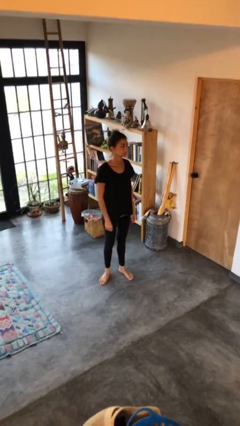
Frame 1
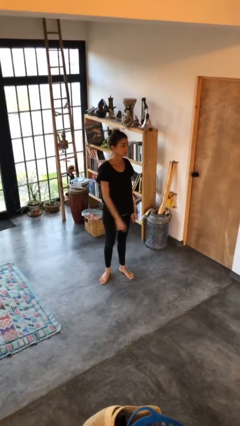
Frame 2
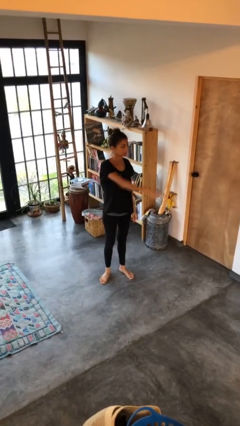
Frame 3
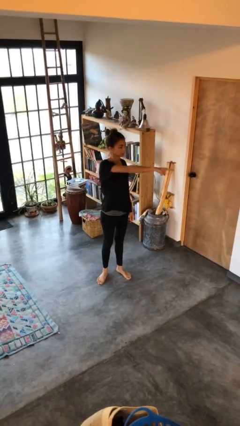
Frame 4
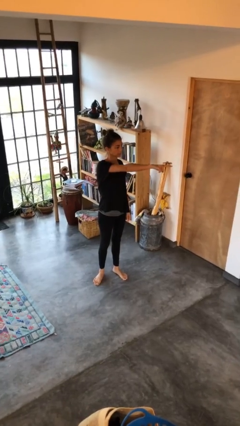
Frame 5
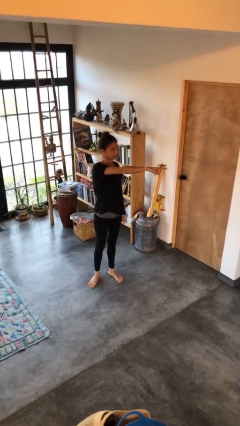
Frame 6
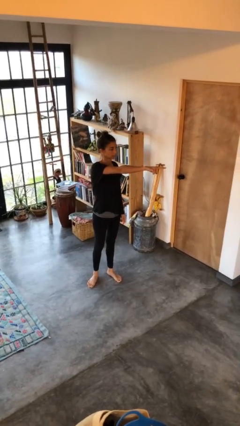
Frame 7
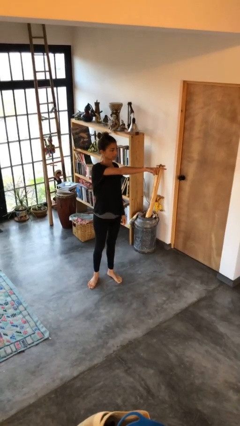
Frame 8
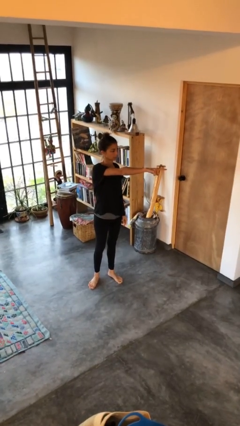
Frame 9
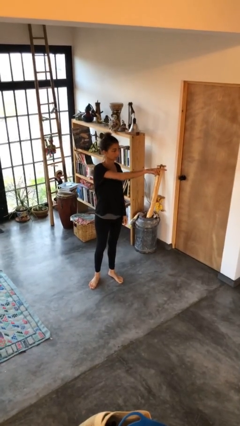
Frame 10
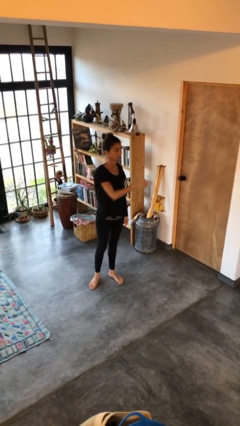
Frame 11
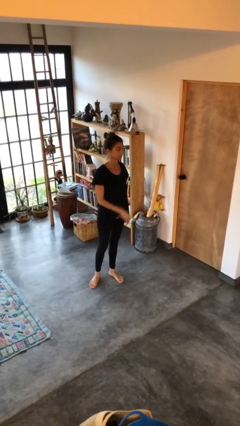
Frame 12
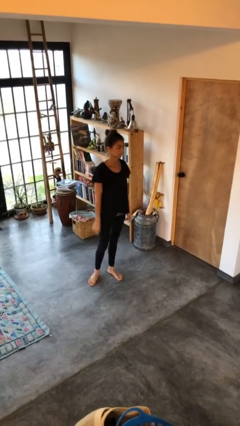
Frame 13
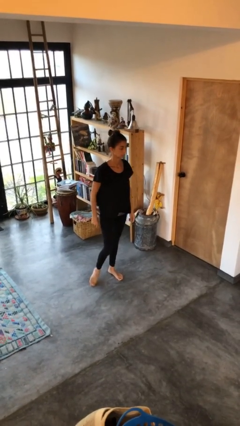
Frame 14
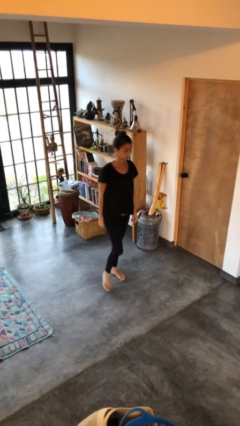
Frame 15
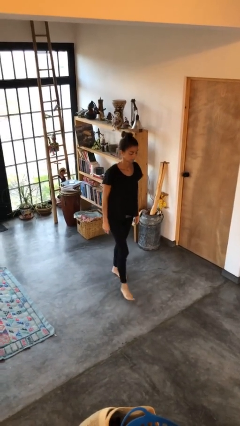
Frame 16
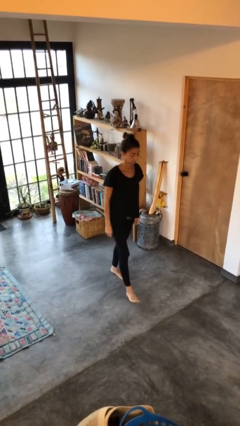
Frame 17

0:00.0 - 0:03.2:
person points at person

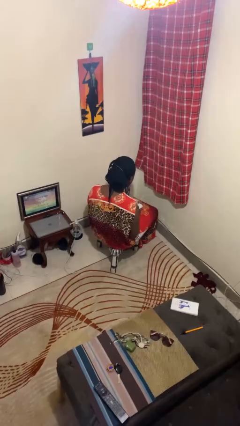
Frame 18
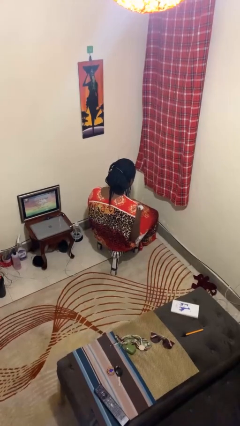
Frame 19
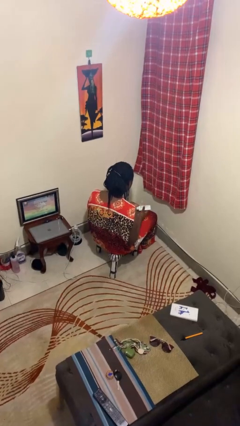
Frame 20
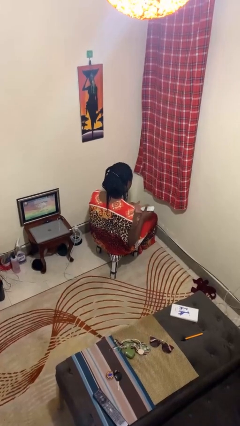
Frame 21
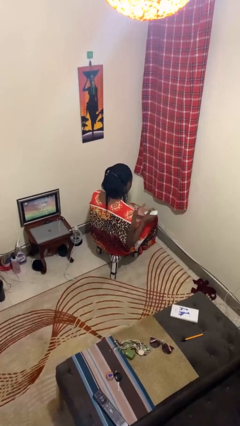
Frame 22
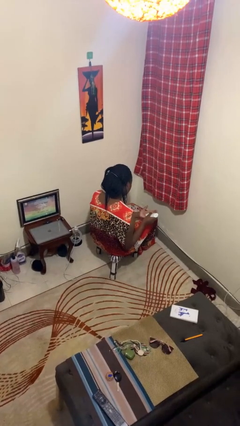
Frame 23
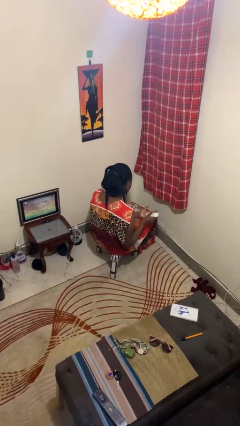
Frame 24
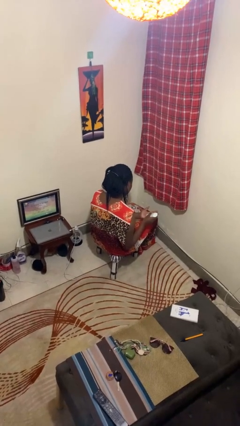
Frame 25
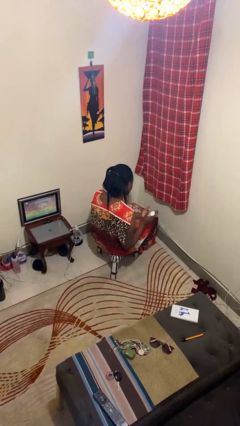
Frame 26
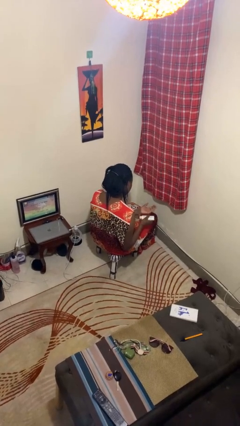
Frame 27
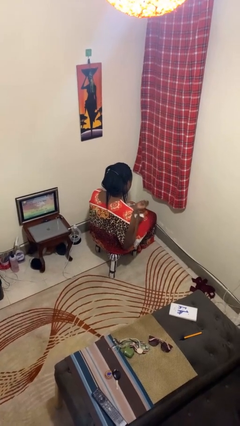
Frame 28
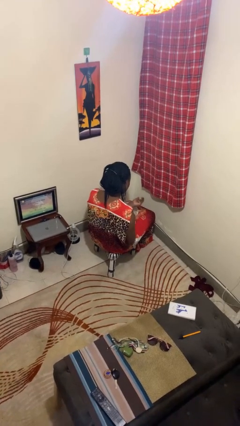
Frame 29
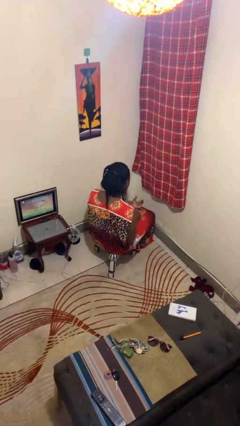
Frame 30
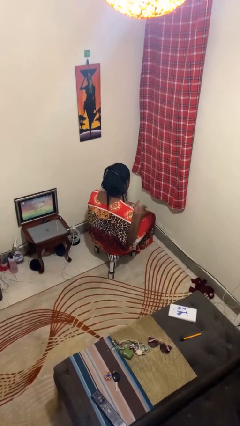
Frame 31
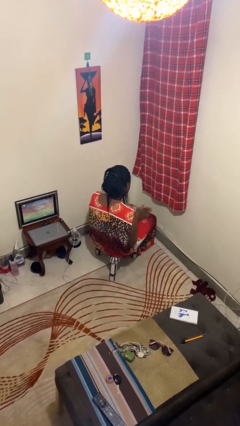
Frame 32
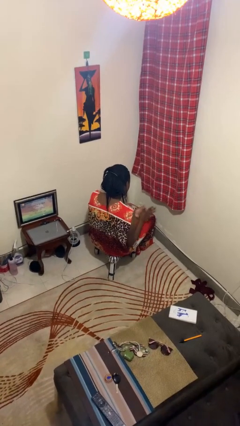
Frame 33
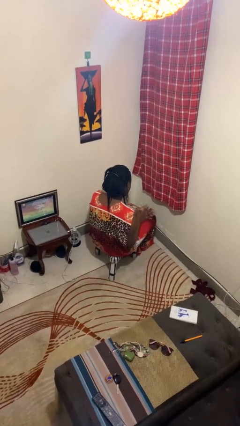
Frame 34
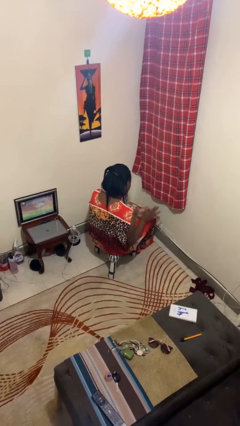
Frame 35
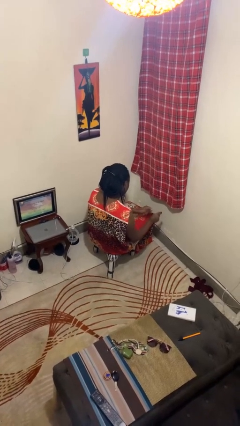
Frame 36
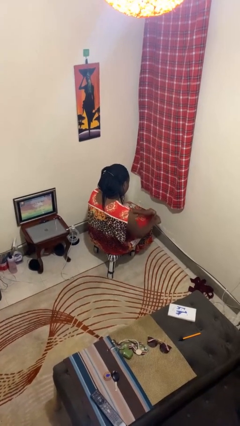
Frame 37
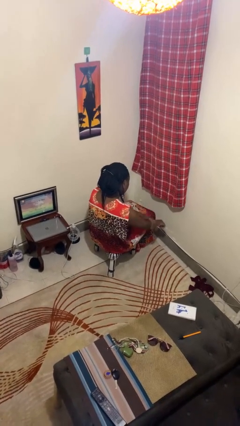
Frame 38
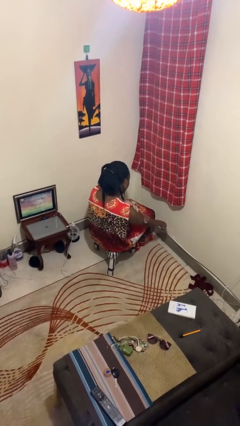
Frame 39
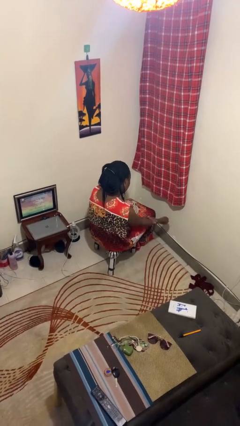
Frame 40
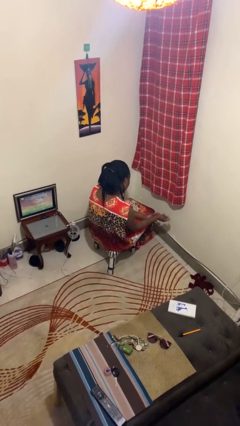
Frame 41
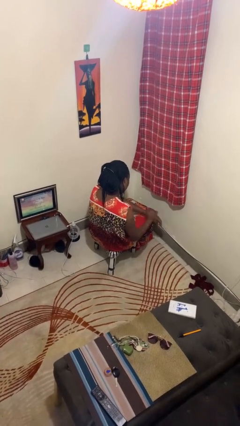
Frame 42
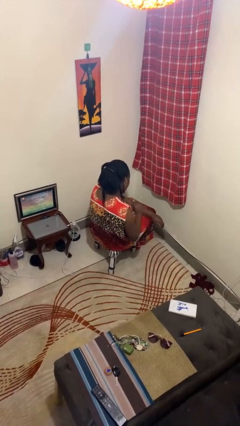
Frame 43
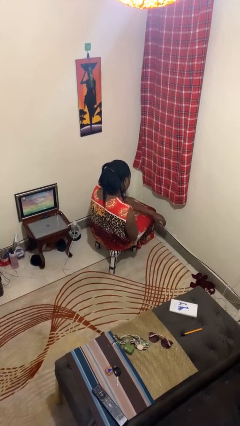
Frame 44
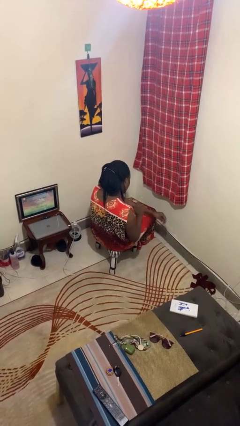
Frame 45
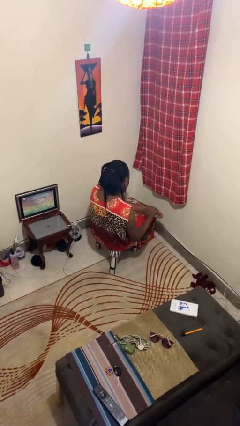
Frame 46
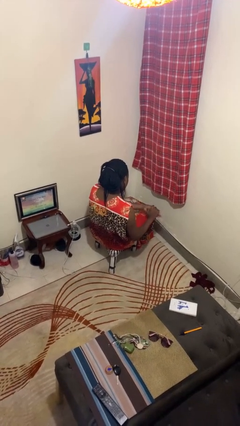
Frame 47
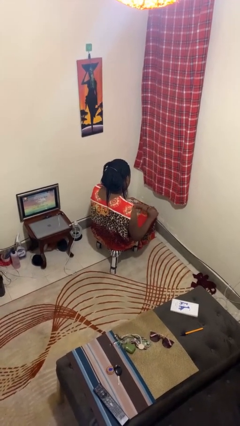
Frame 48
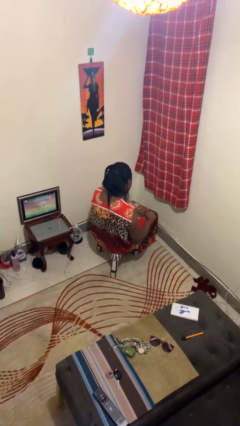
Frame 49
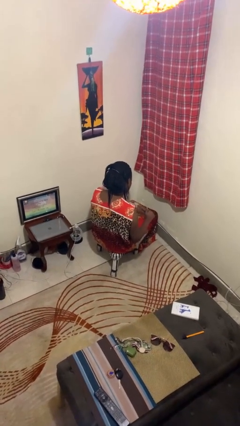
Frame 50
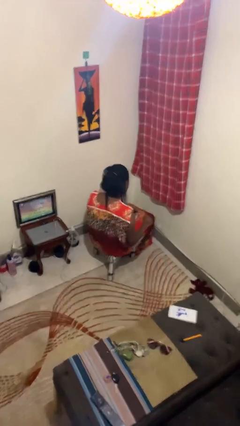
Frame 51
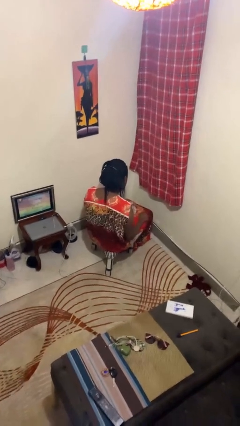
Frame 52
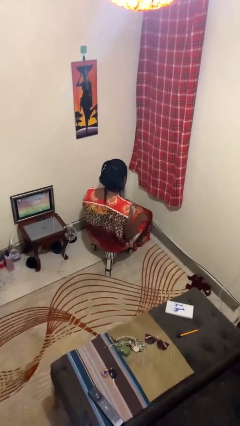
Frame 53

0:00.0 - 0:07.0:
person applies sunscreen

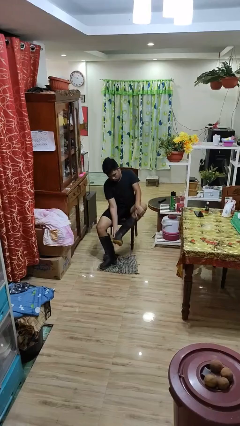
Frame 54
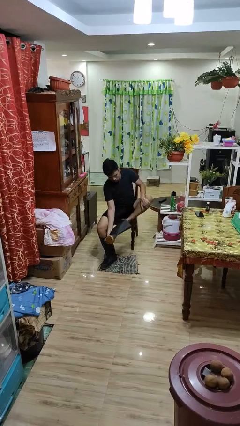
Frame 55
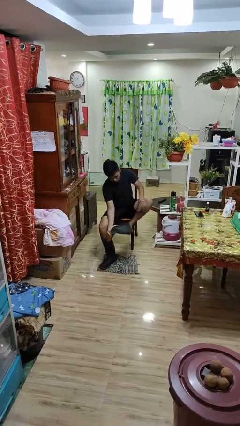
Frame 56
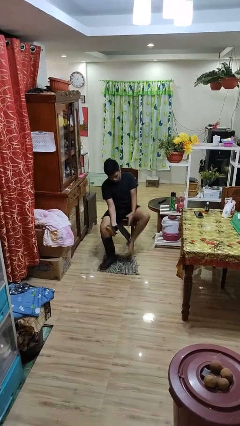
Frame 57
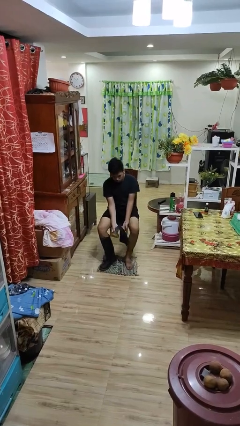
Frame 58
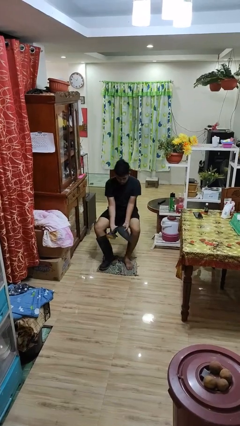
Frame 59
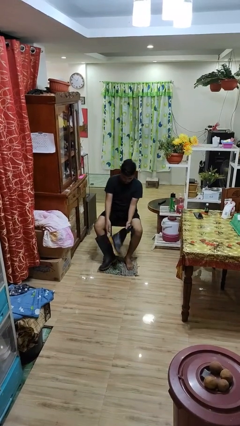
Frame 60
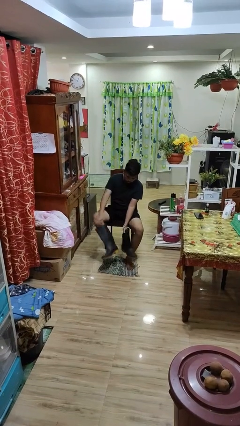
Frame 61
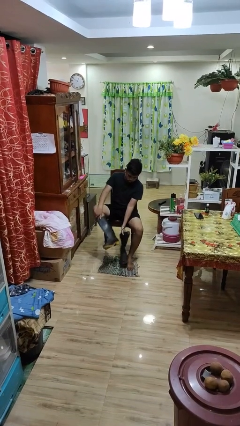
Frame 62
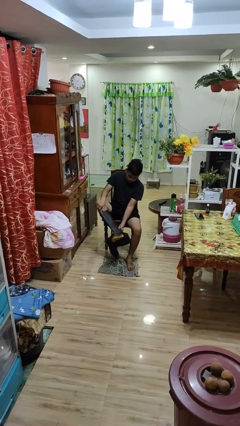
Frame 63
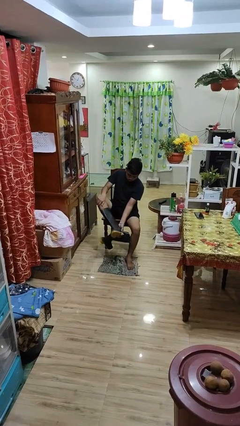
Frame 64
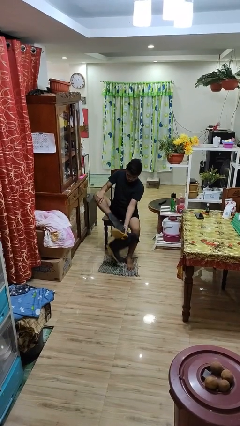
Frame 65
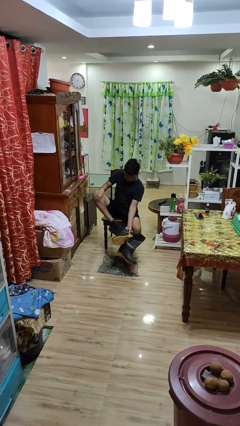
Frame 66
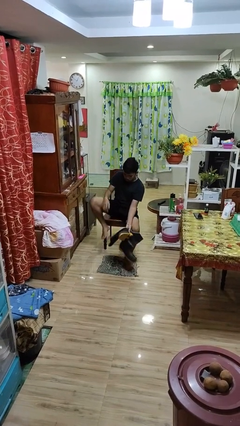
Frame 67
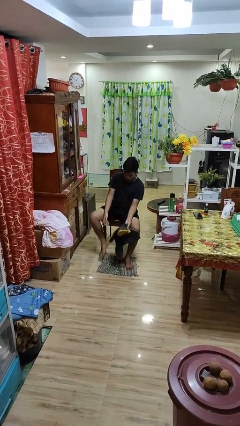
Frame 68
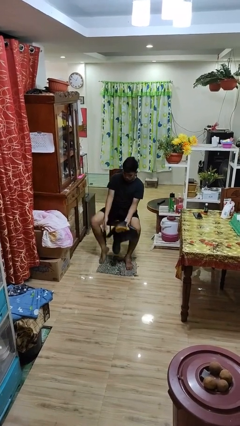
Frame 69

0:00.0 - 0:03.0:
person uses television remote

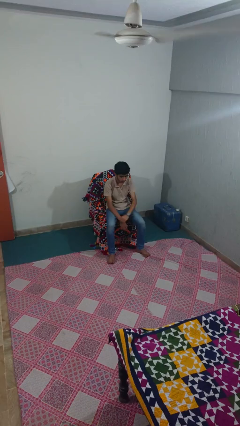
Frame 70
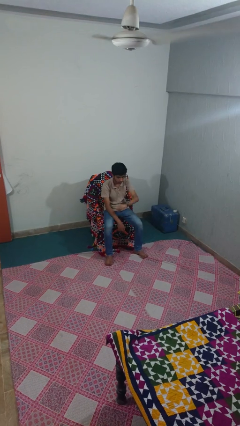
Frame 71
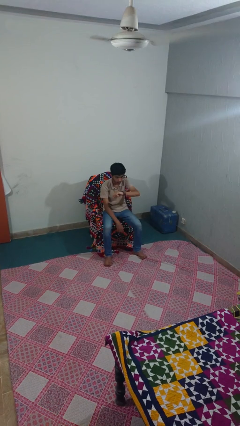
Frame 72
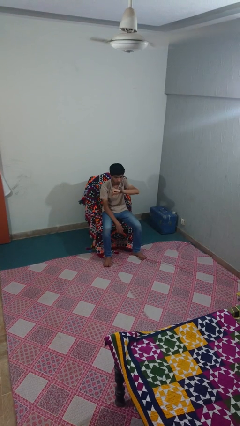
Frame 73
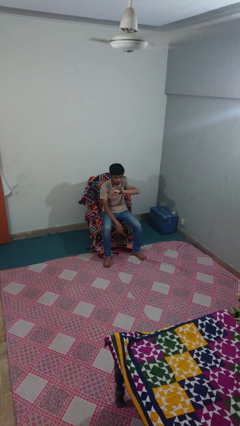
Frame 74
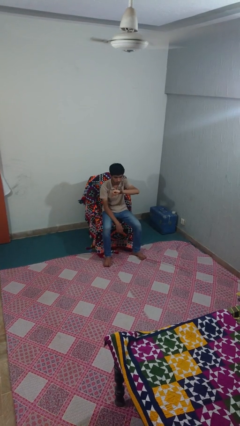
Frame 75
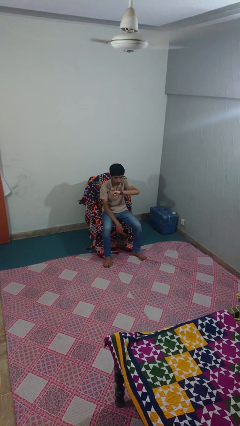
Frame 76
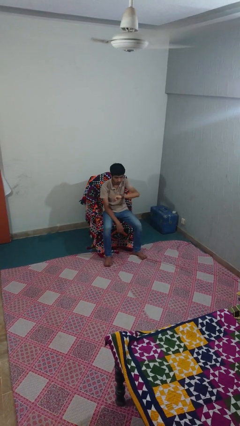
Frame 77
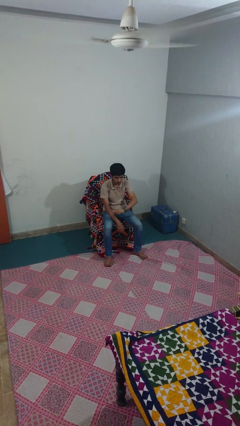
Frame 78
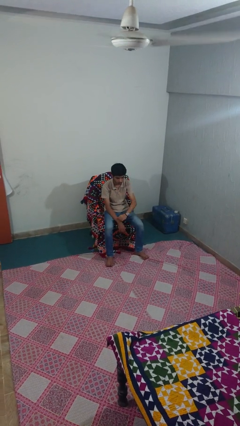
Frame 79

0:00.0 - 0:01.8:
person looks at wristwatch

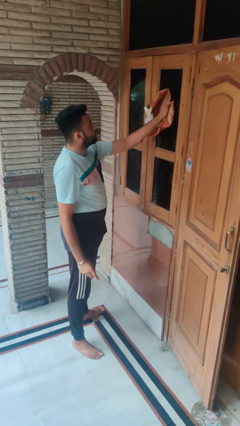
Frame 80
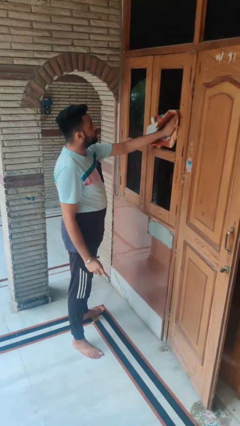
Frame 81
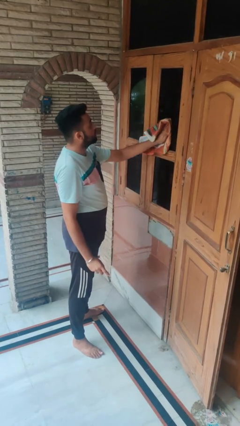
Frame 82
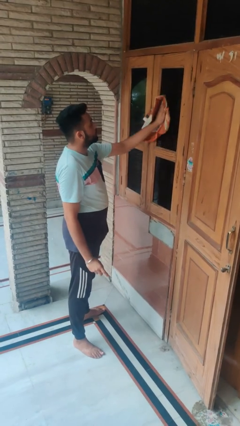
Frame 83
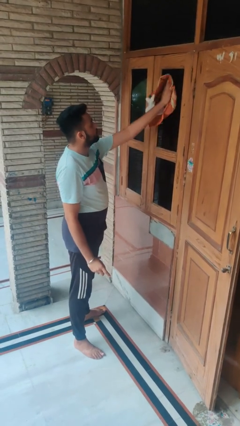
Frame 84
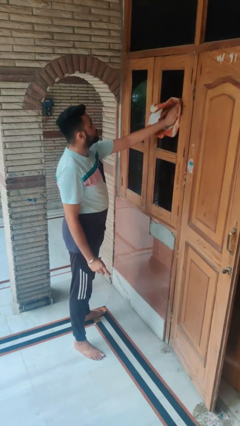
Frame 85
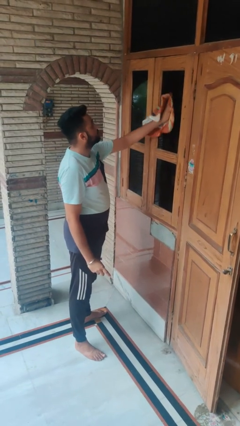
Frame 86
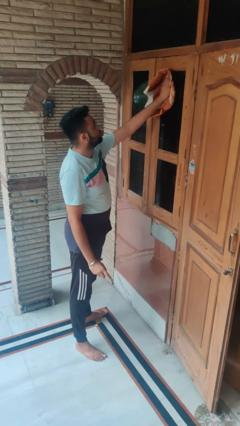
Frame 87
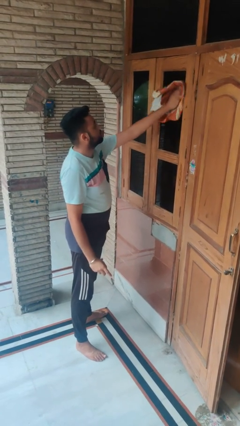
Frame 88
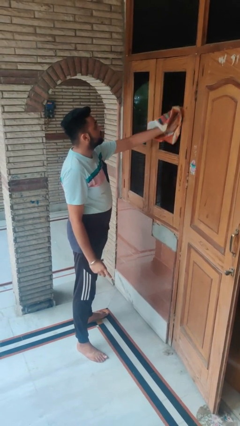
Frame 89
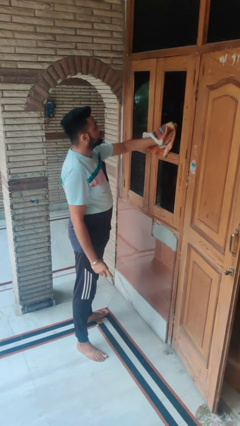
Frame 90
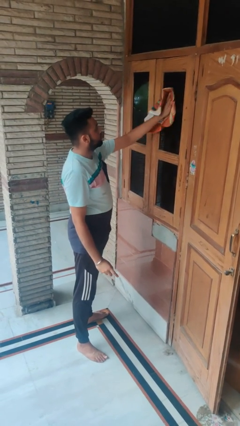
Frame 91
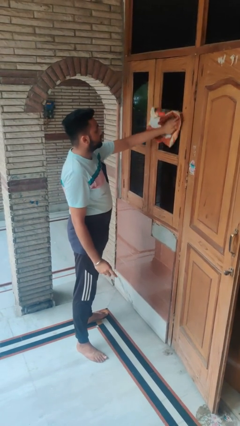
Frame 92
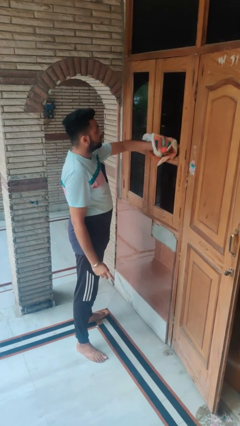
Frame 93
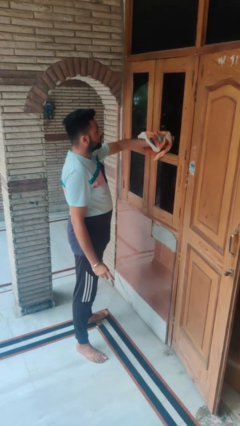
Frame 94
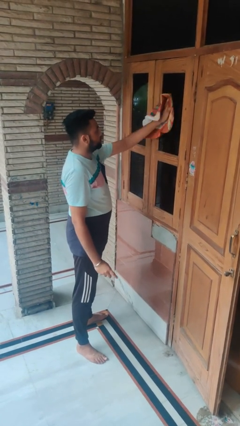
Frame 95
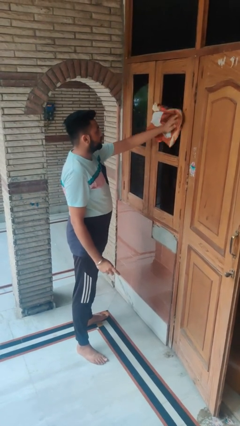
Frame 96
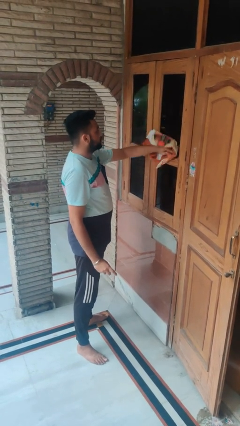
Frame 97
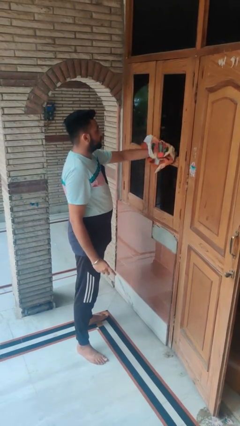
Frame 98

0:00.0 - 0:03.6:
person washes window
